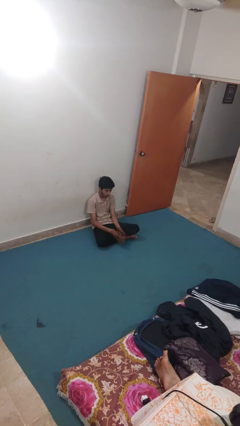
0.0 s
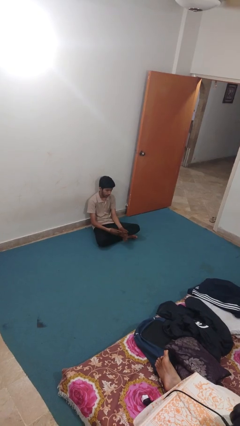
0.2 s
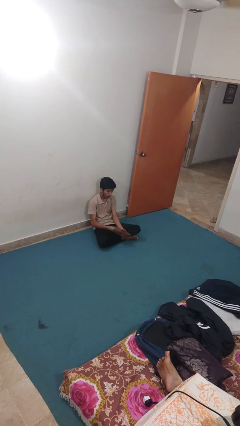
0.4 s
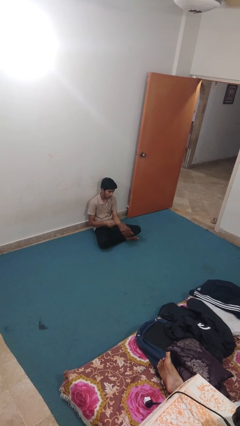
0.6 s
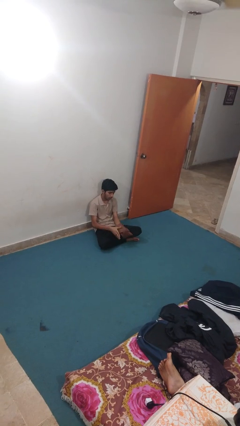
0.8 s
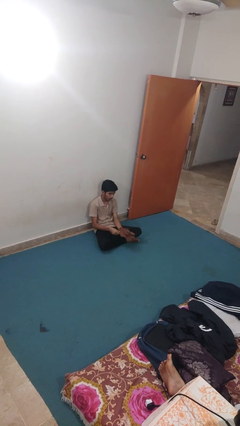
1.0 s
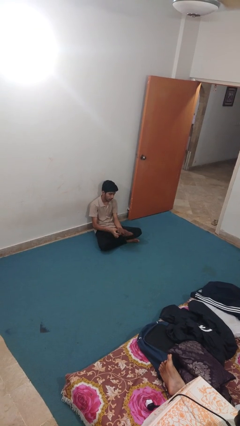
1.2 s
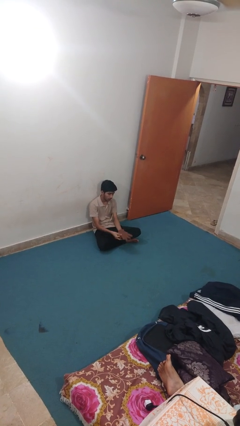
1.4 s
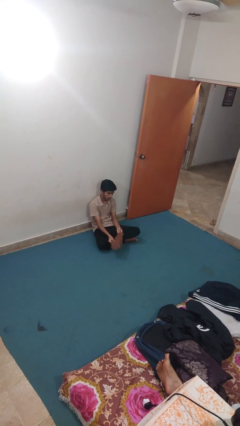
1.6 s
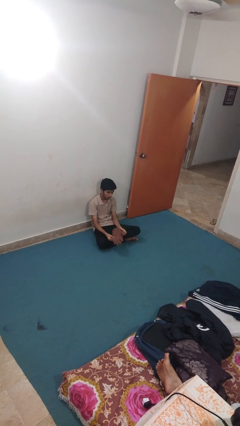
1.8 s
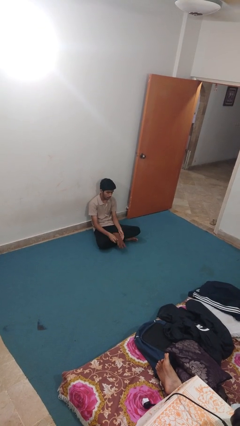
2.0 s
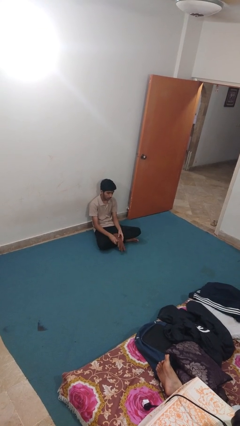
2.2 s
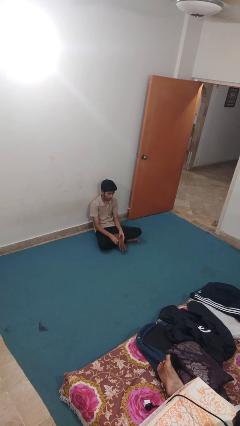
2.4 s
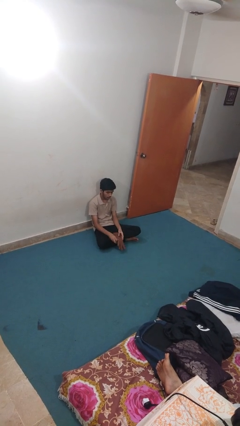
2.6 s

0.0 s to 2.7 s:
person takes off gloves

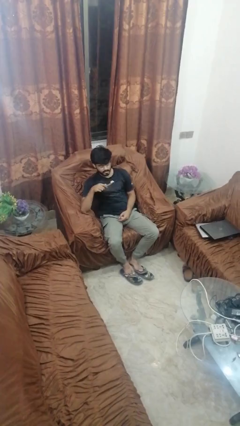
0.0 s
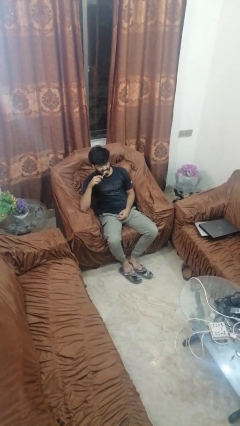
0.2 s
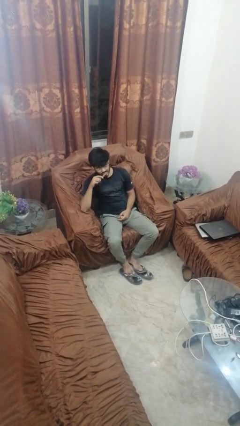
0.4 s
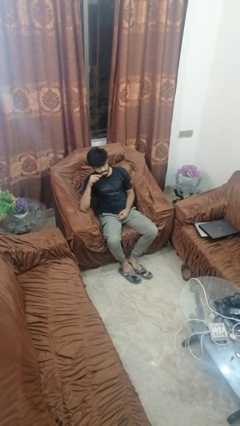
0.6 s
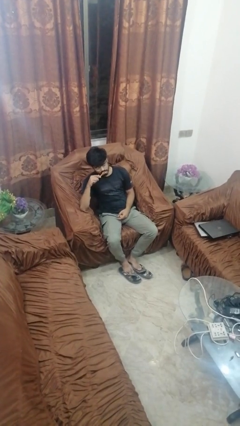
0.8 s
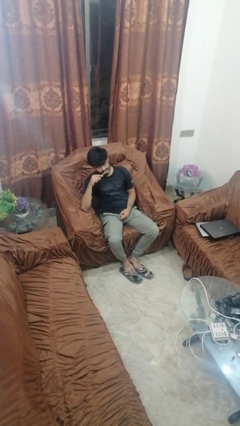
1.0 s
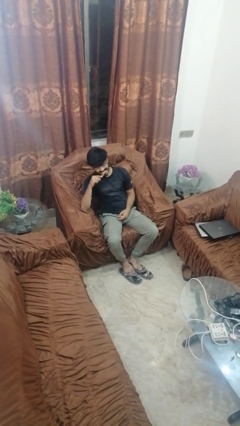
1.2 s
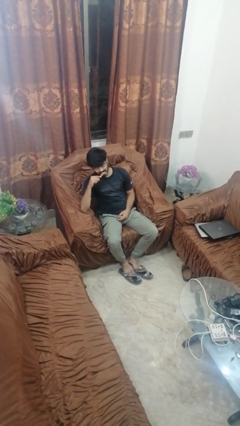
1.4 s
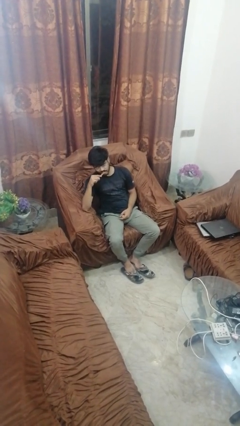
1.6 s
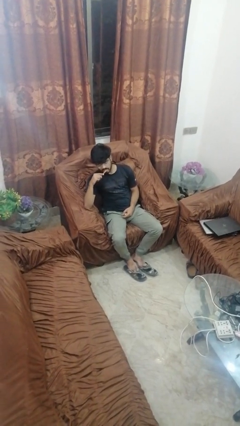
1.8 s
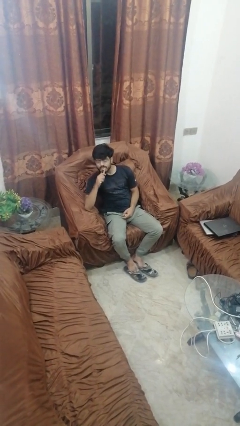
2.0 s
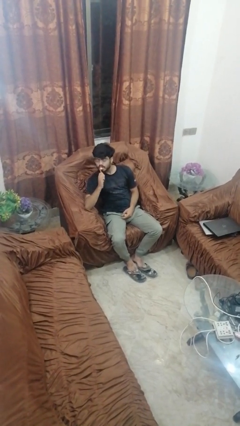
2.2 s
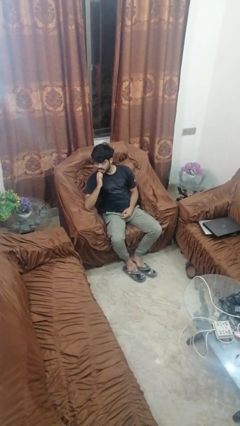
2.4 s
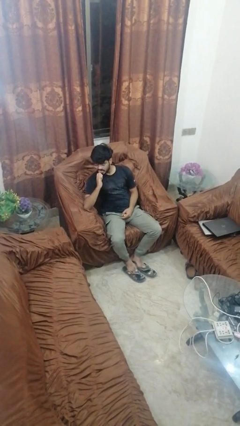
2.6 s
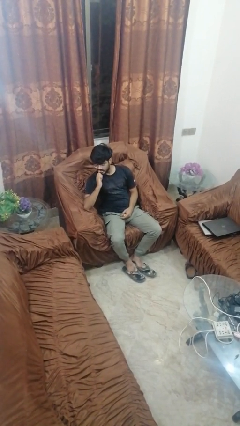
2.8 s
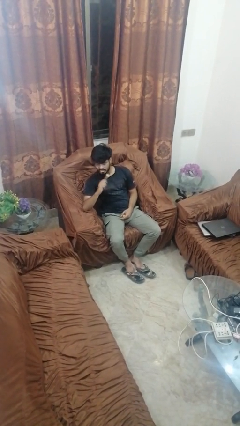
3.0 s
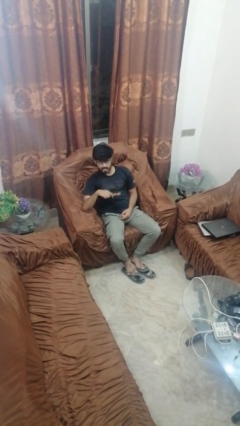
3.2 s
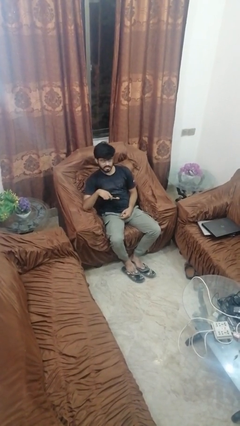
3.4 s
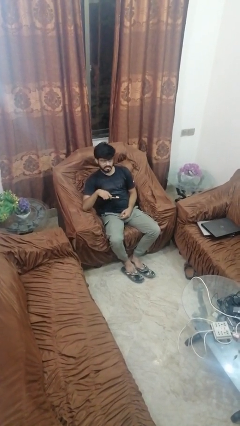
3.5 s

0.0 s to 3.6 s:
person brushes teeth

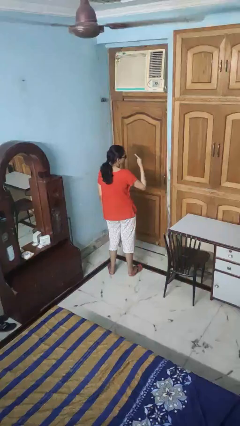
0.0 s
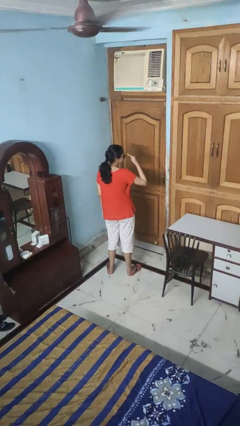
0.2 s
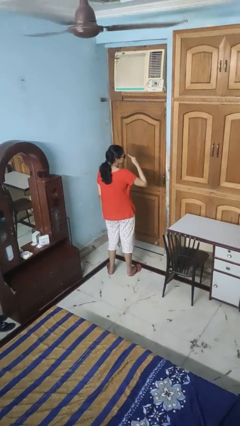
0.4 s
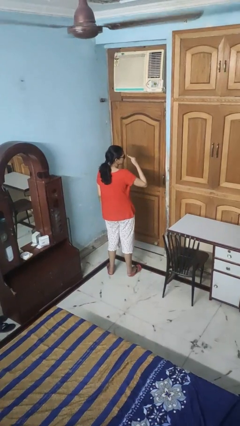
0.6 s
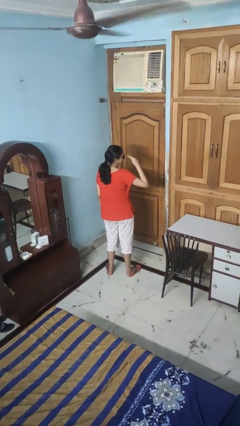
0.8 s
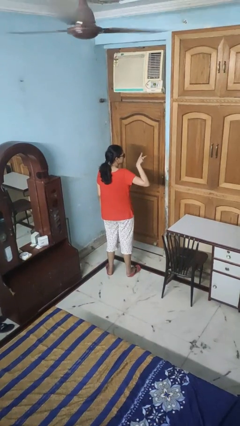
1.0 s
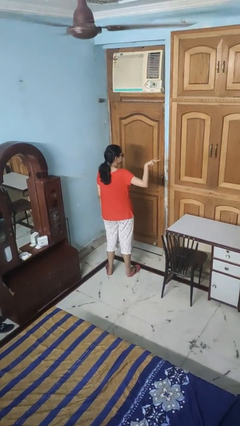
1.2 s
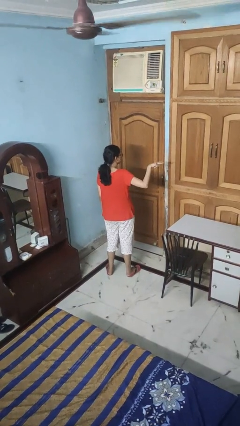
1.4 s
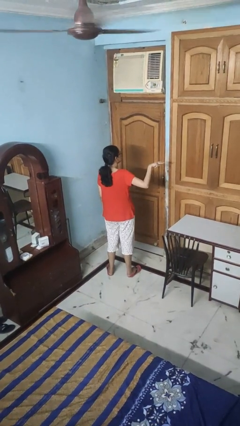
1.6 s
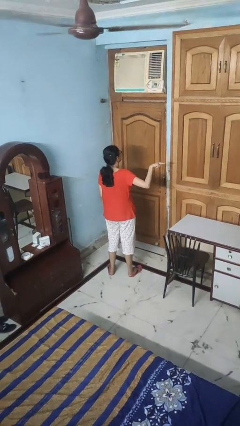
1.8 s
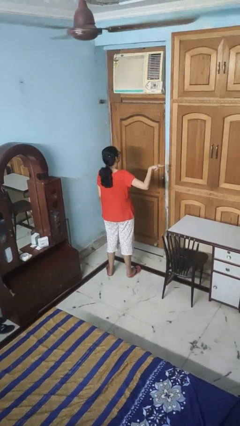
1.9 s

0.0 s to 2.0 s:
person gestures watch closely

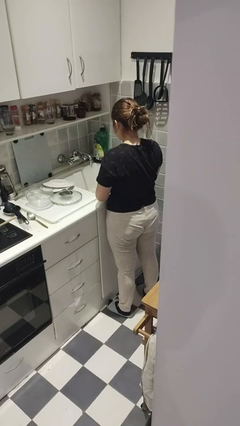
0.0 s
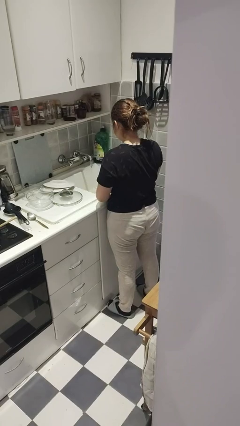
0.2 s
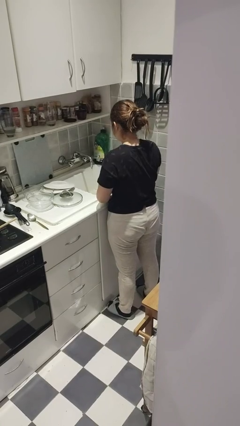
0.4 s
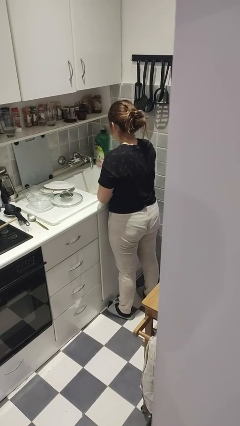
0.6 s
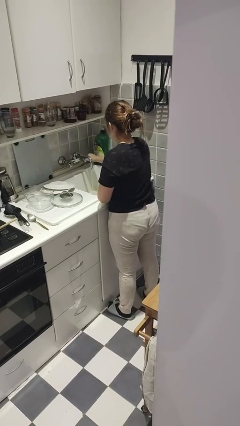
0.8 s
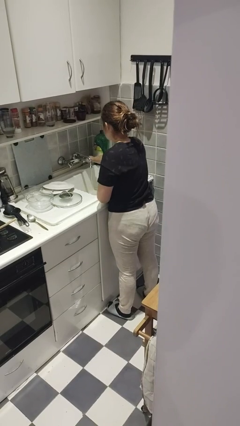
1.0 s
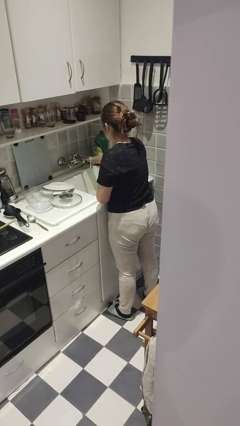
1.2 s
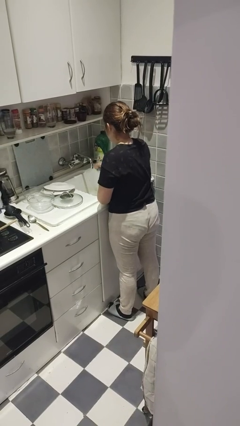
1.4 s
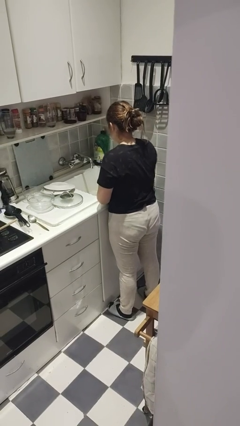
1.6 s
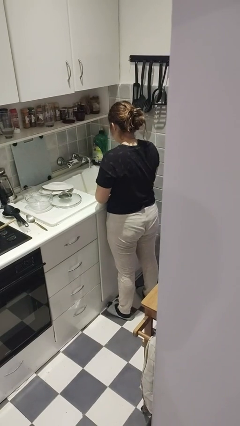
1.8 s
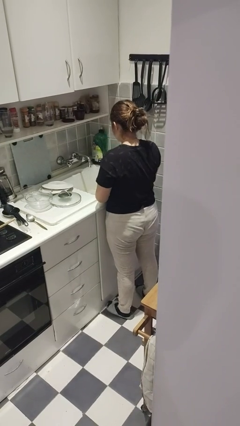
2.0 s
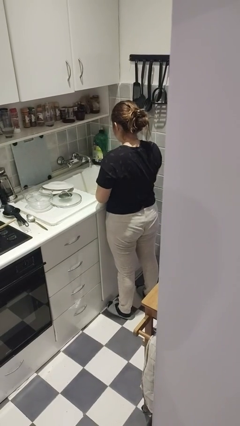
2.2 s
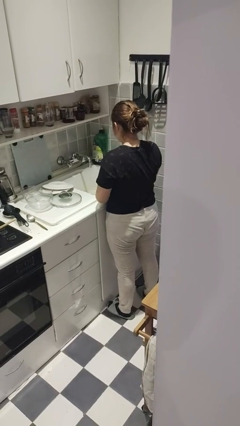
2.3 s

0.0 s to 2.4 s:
person turns off faucet

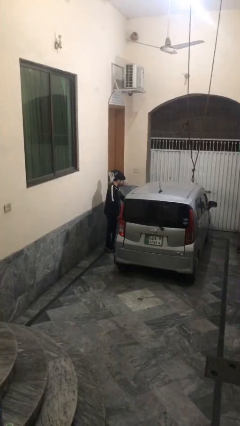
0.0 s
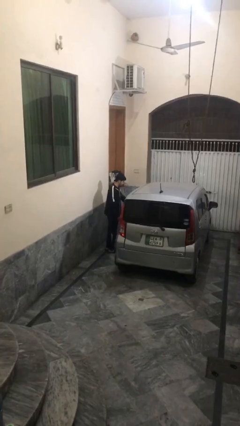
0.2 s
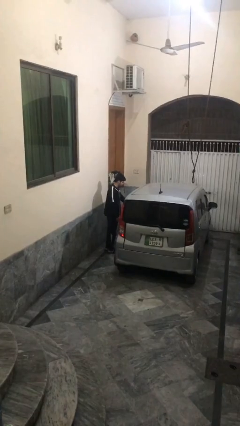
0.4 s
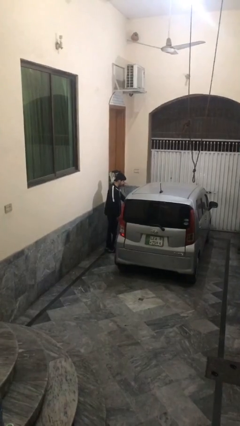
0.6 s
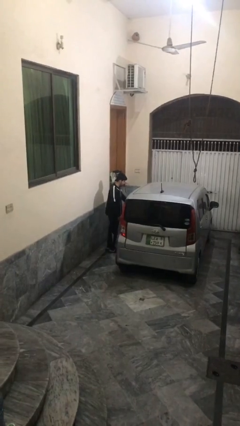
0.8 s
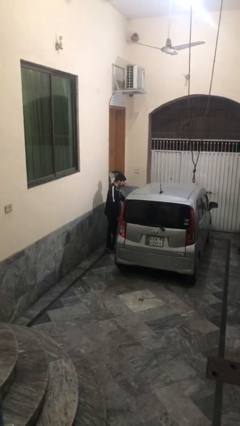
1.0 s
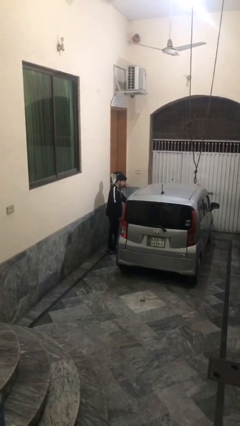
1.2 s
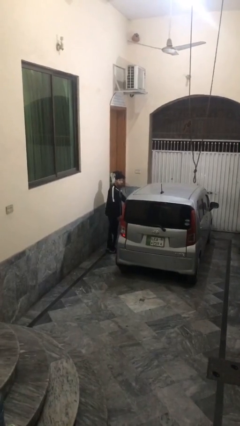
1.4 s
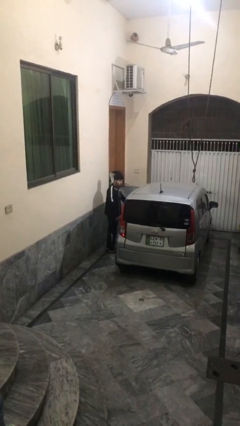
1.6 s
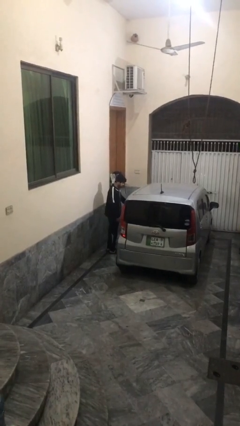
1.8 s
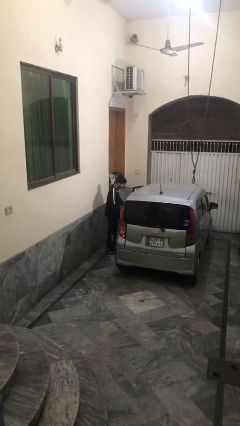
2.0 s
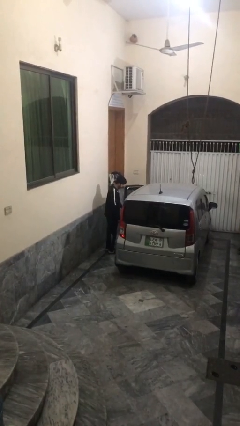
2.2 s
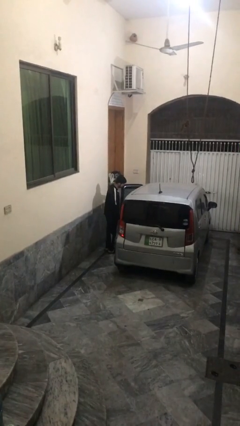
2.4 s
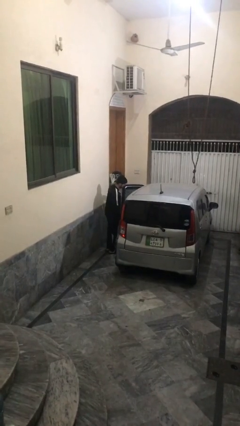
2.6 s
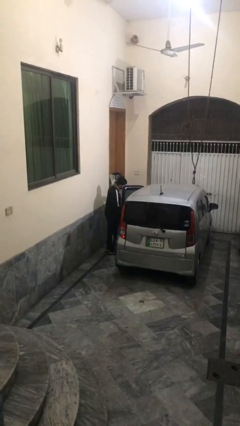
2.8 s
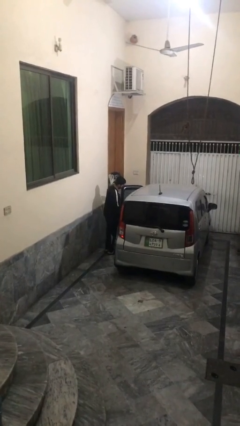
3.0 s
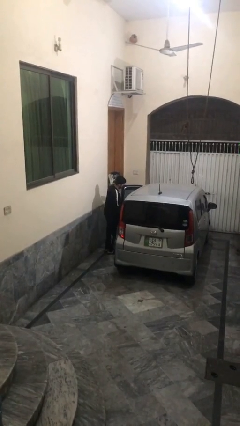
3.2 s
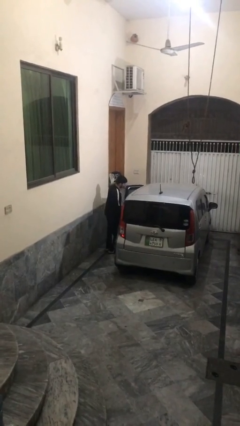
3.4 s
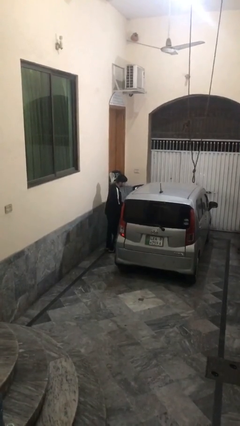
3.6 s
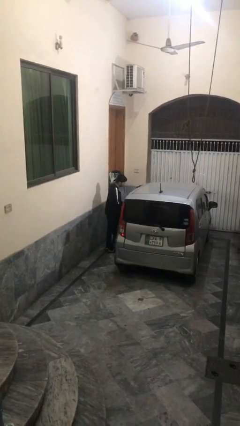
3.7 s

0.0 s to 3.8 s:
person opens car door

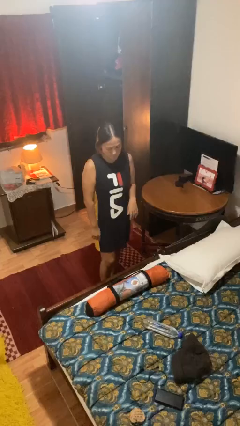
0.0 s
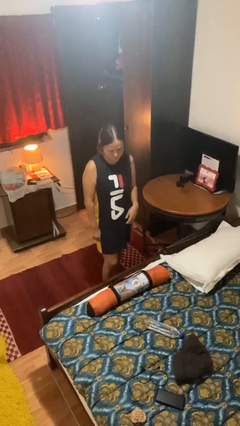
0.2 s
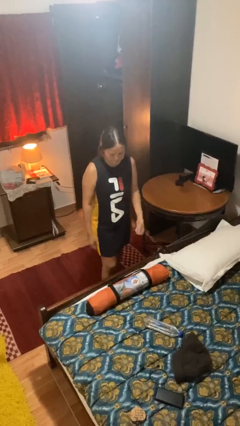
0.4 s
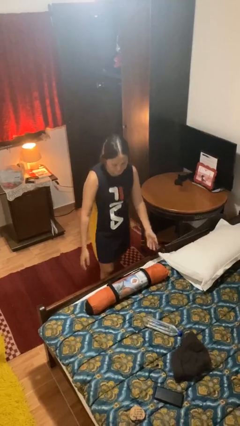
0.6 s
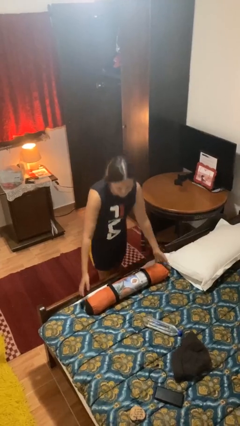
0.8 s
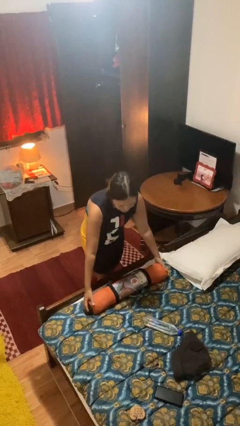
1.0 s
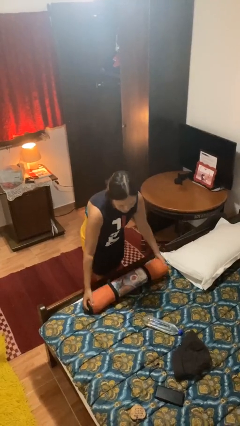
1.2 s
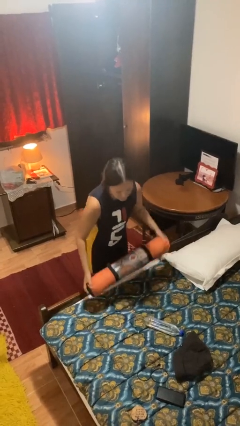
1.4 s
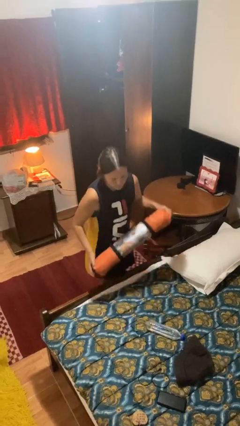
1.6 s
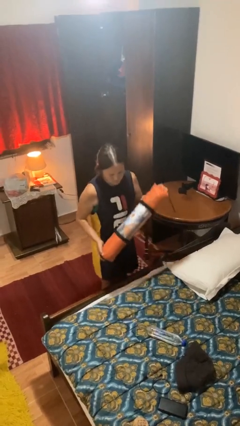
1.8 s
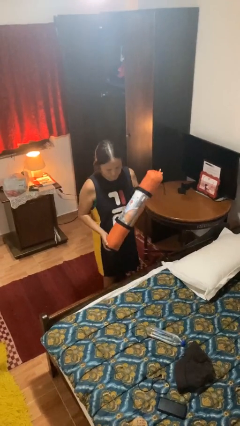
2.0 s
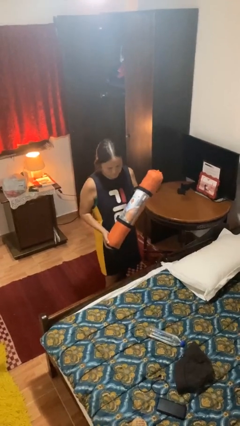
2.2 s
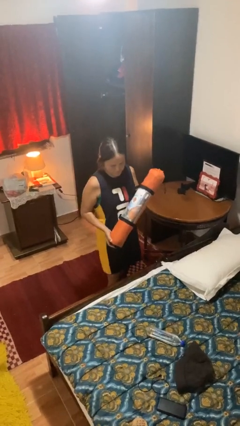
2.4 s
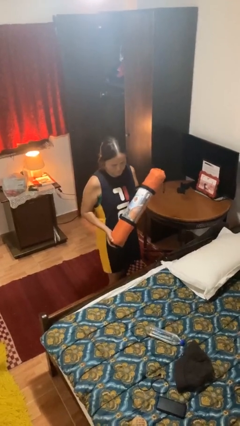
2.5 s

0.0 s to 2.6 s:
person picks up object from bed

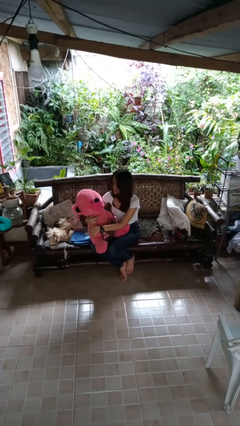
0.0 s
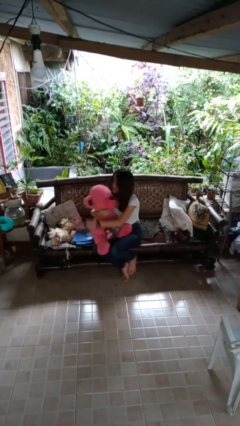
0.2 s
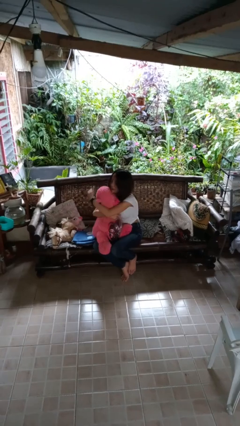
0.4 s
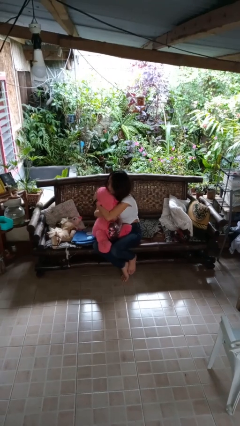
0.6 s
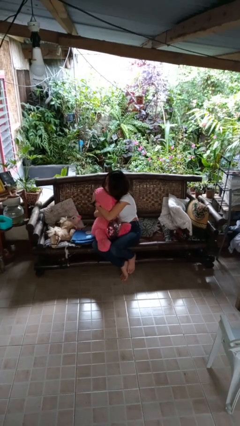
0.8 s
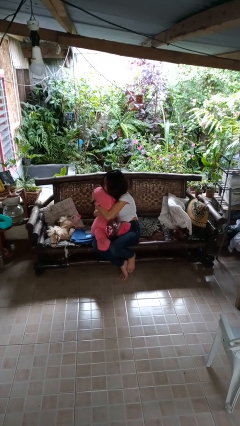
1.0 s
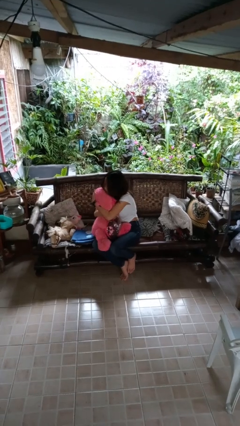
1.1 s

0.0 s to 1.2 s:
person hugs stuffed animal
